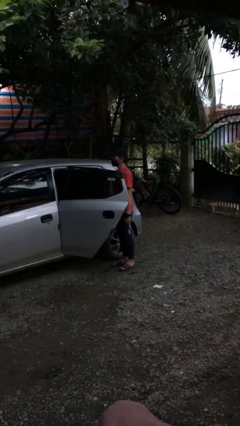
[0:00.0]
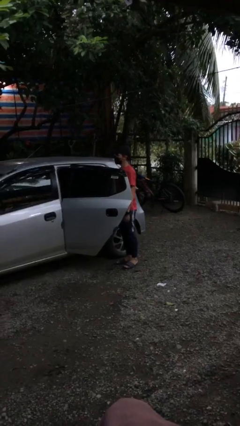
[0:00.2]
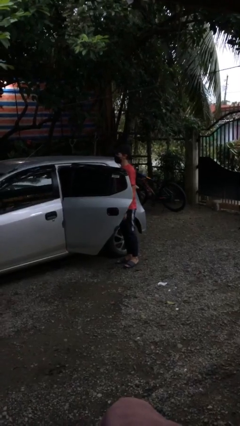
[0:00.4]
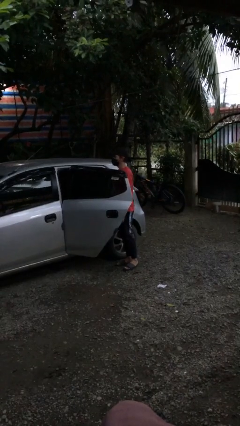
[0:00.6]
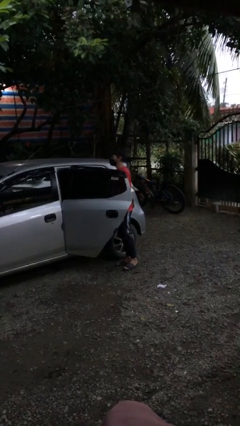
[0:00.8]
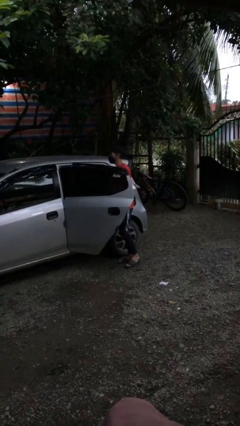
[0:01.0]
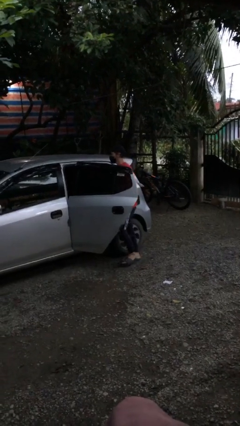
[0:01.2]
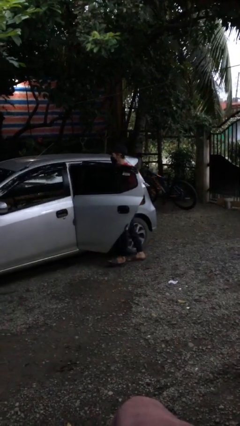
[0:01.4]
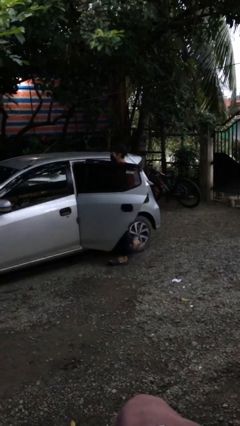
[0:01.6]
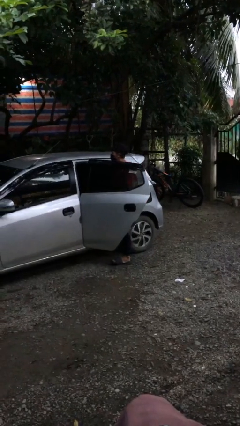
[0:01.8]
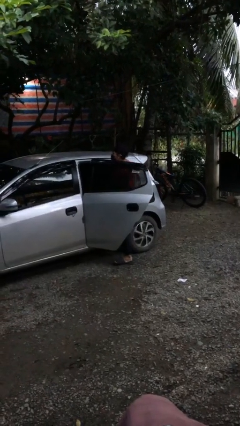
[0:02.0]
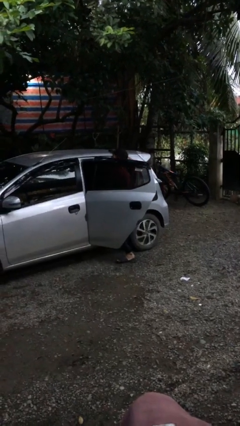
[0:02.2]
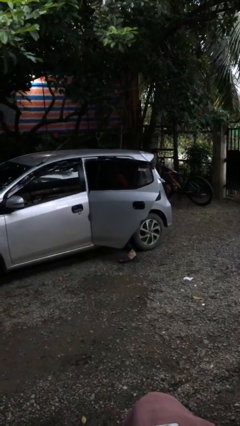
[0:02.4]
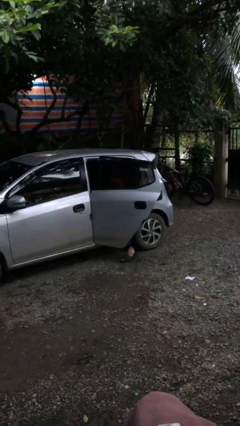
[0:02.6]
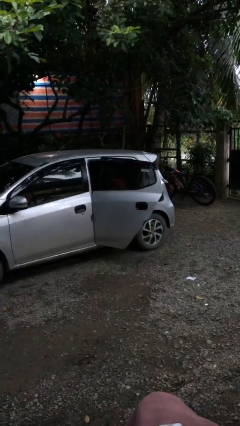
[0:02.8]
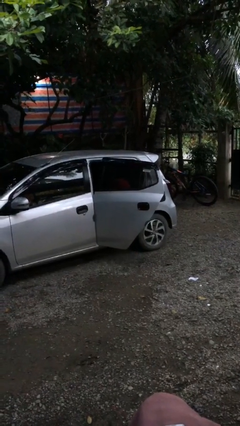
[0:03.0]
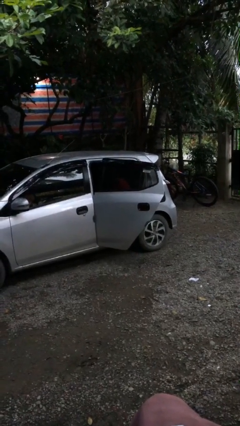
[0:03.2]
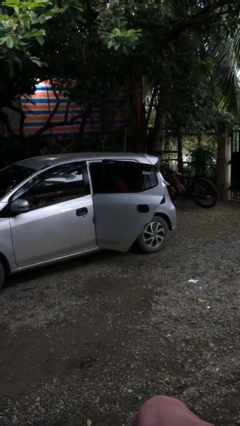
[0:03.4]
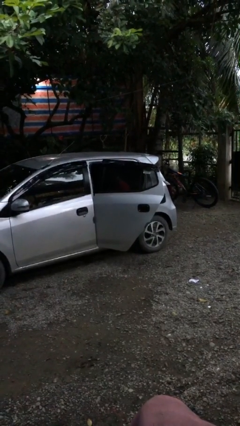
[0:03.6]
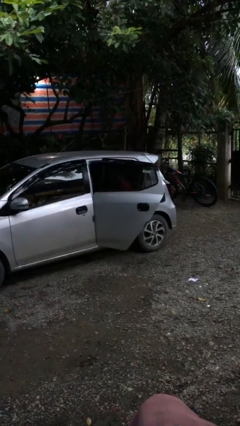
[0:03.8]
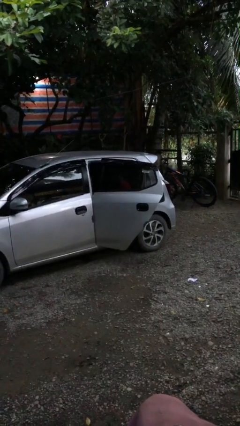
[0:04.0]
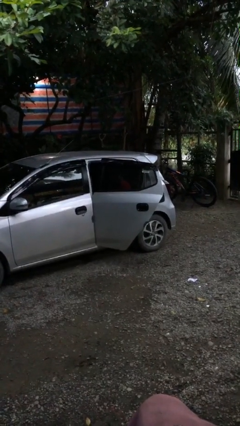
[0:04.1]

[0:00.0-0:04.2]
person enters car

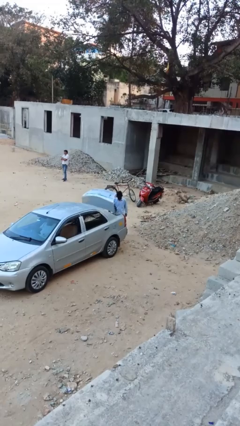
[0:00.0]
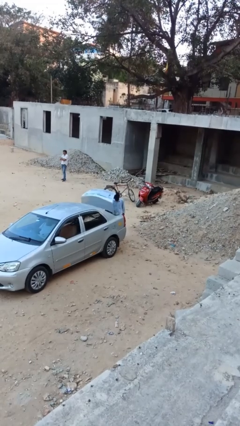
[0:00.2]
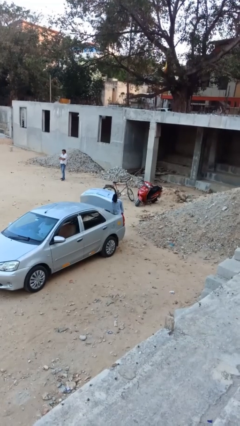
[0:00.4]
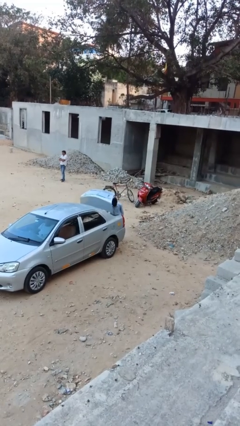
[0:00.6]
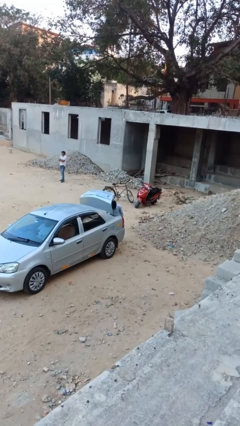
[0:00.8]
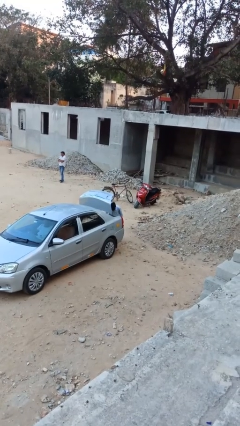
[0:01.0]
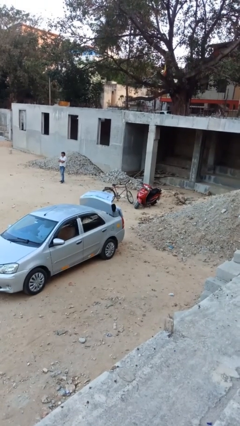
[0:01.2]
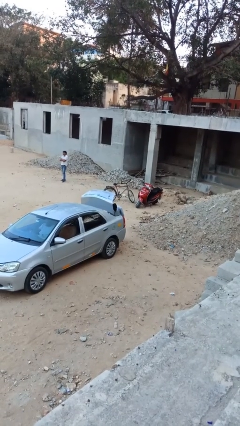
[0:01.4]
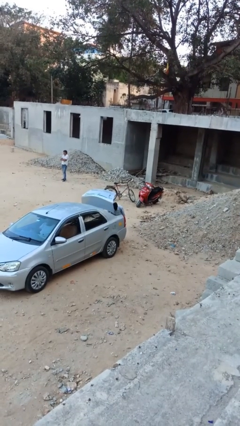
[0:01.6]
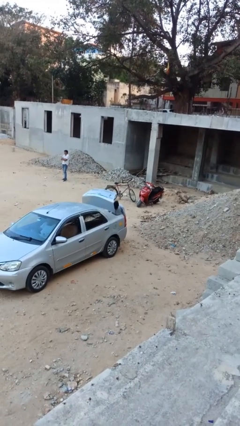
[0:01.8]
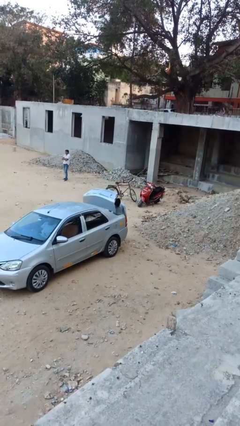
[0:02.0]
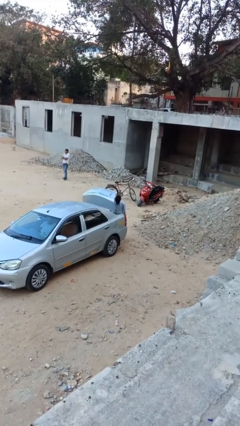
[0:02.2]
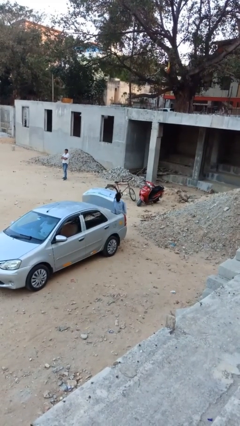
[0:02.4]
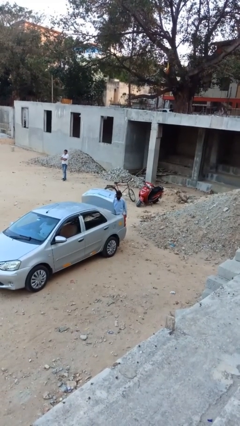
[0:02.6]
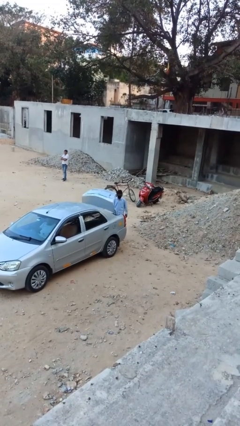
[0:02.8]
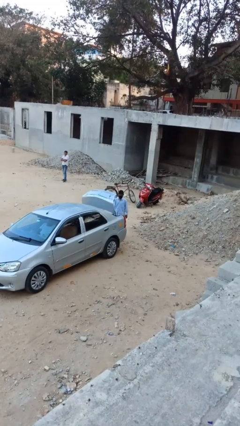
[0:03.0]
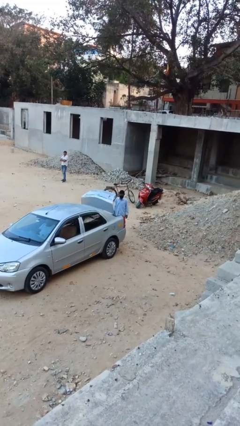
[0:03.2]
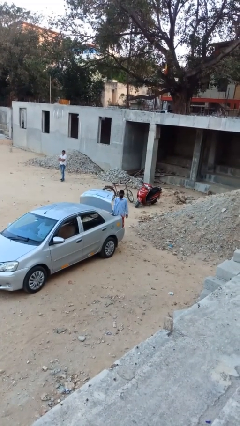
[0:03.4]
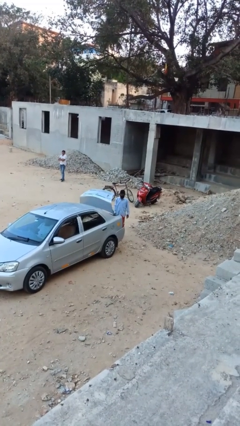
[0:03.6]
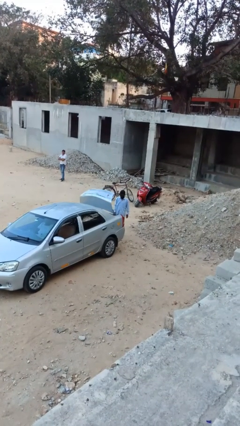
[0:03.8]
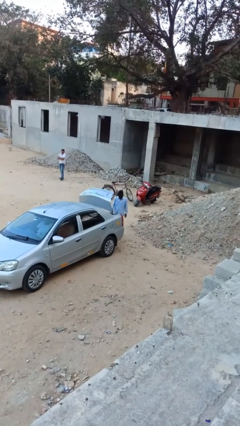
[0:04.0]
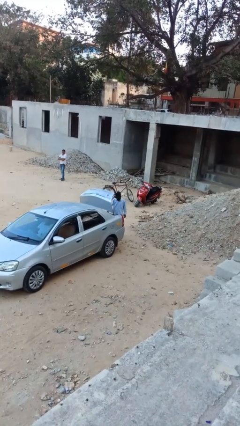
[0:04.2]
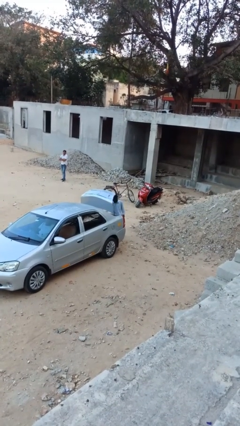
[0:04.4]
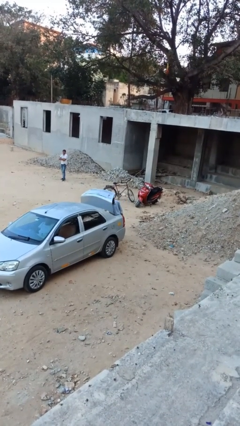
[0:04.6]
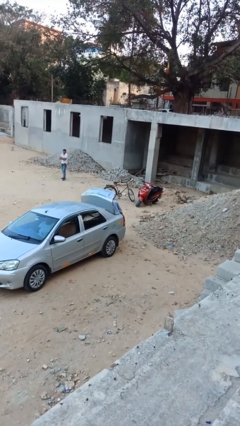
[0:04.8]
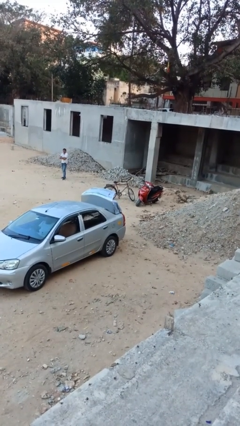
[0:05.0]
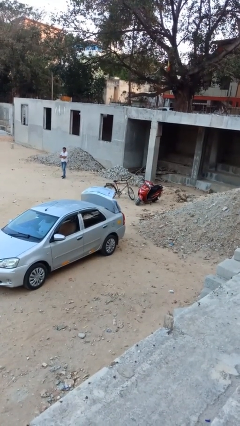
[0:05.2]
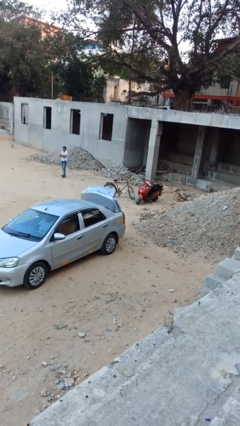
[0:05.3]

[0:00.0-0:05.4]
person loads car

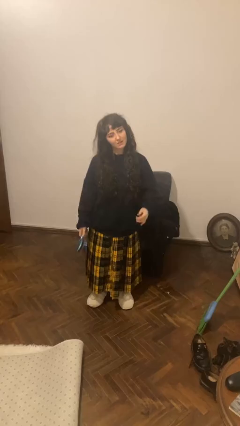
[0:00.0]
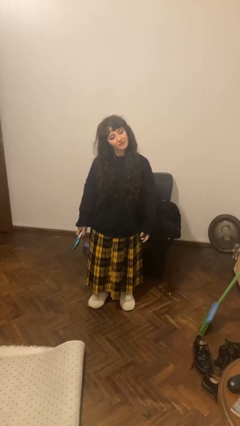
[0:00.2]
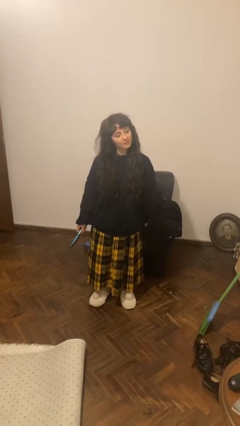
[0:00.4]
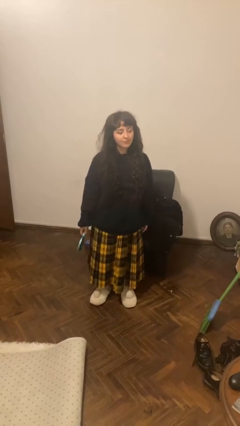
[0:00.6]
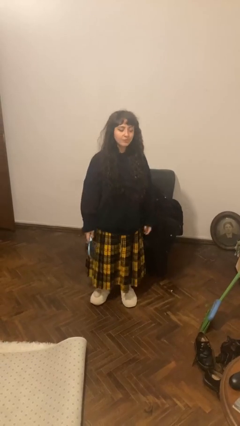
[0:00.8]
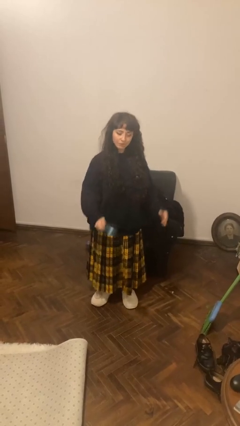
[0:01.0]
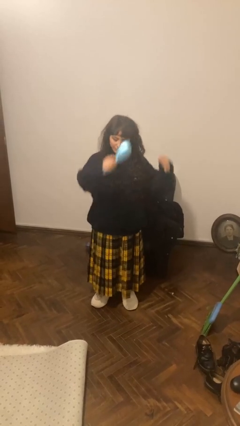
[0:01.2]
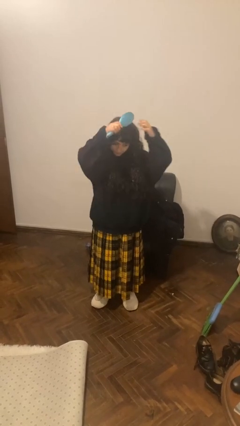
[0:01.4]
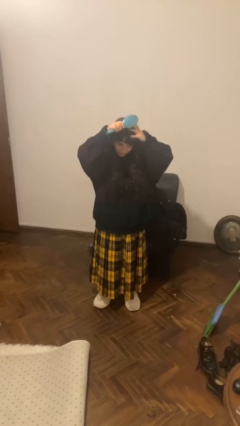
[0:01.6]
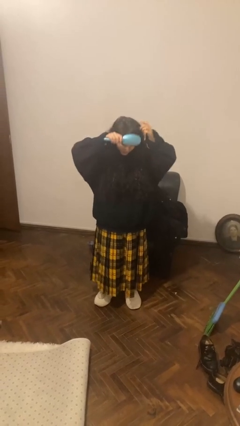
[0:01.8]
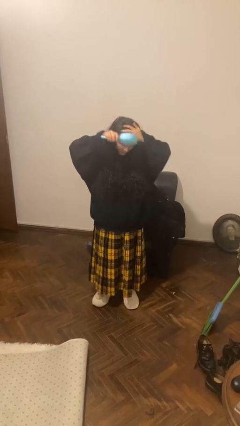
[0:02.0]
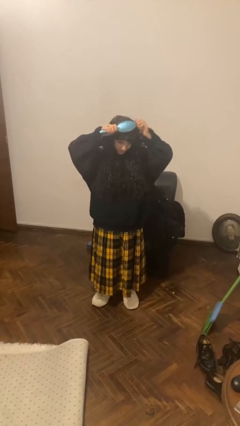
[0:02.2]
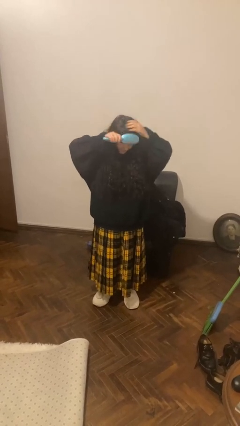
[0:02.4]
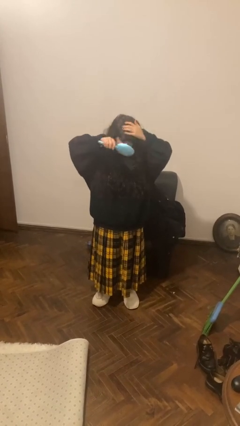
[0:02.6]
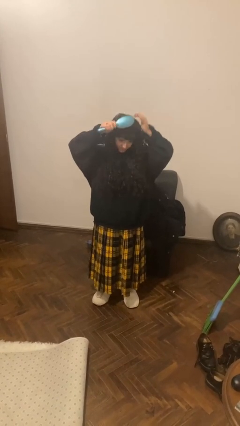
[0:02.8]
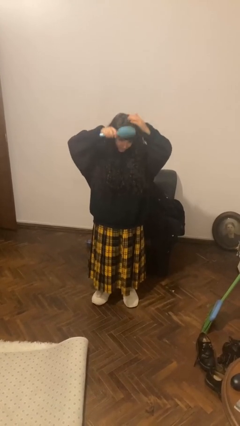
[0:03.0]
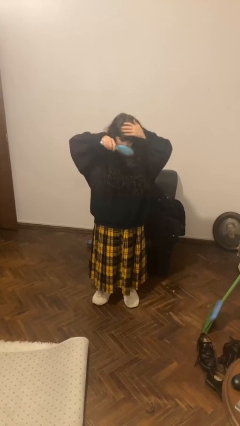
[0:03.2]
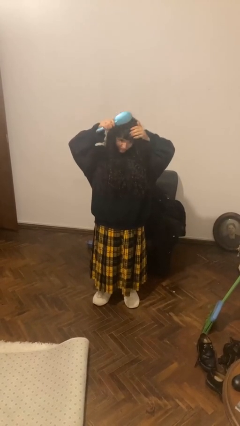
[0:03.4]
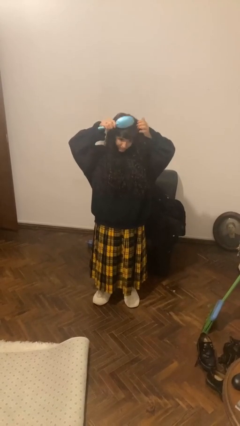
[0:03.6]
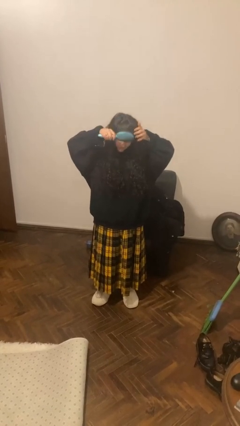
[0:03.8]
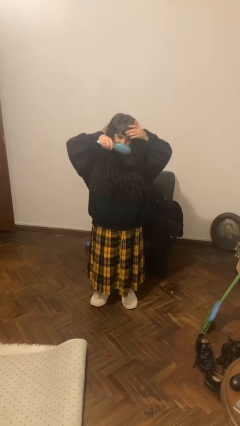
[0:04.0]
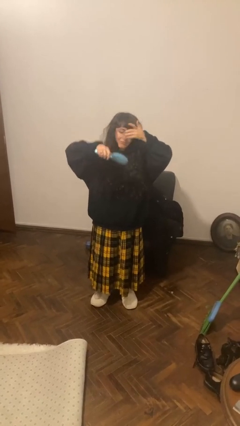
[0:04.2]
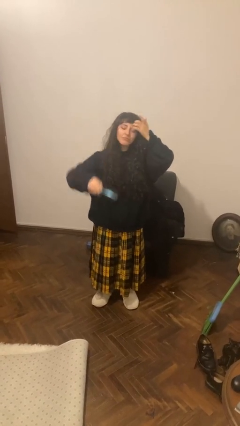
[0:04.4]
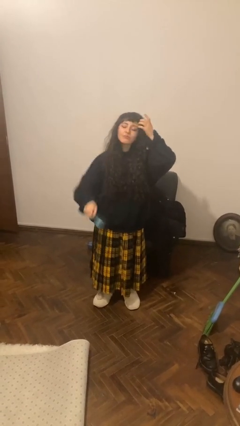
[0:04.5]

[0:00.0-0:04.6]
person brushes hair

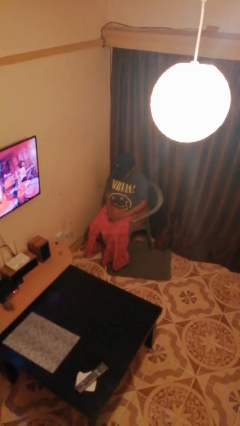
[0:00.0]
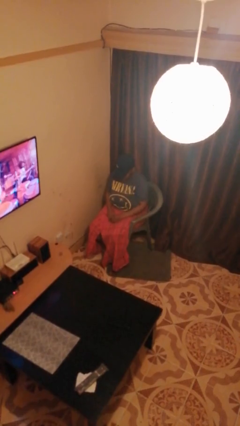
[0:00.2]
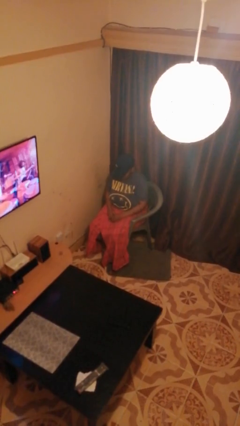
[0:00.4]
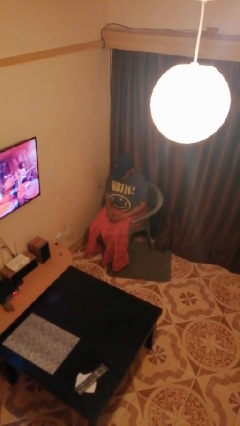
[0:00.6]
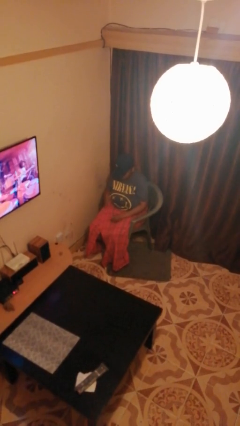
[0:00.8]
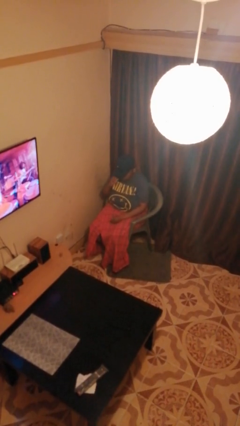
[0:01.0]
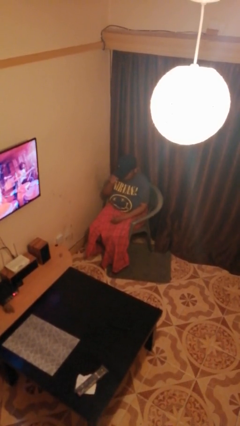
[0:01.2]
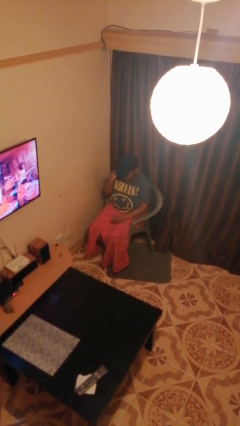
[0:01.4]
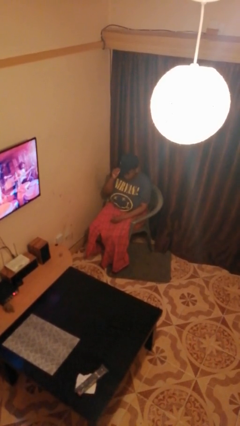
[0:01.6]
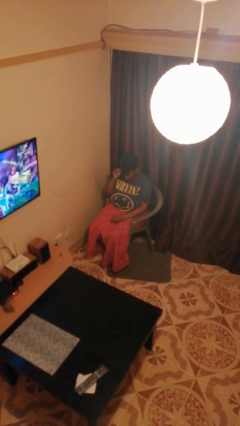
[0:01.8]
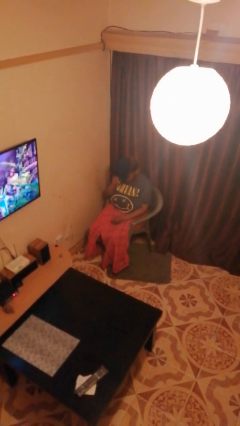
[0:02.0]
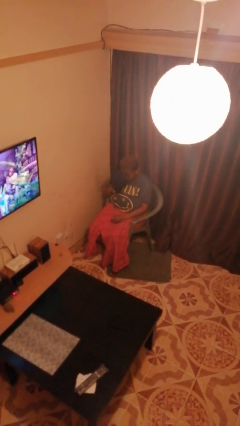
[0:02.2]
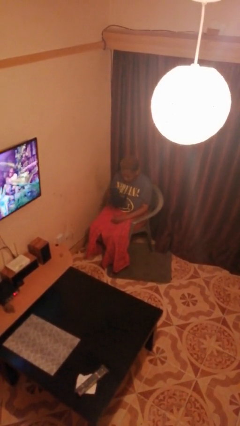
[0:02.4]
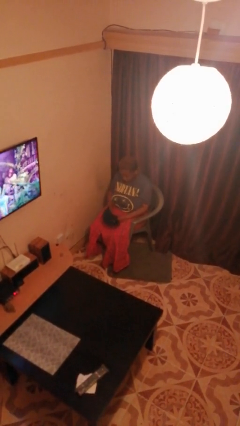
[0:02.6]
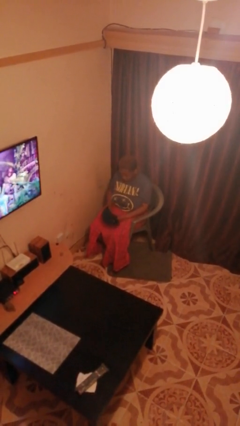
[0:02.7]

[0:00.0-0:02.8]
person takes off hat

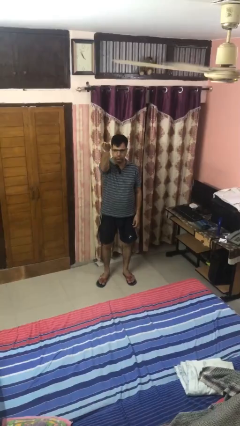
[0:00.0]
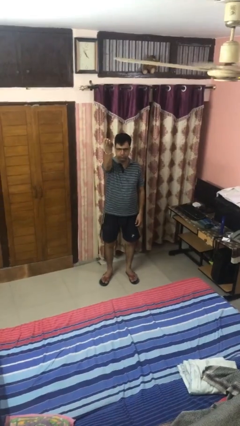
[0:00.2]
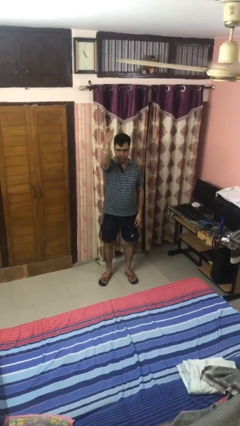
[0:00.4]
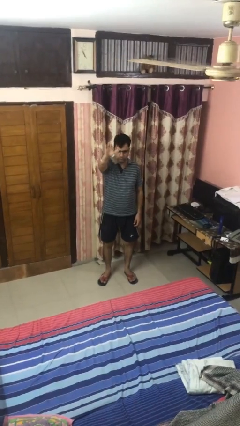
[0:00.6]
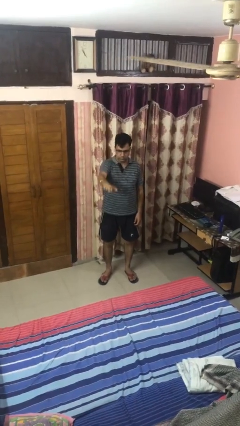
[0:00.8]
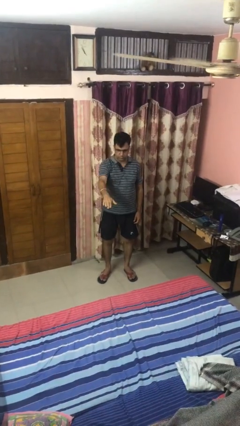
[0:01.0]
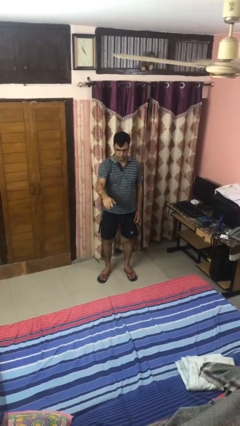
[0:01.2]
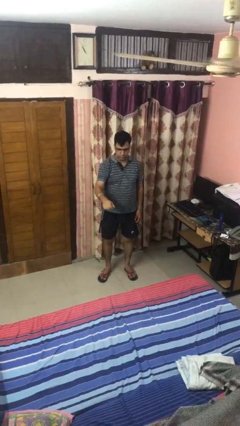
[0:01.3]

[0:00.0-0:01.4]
person gestures swipe down
